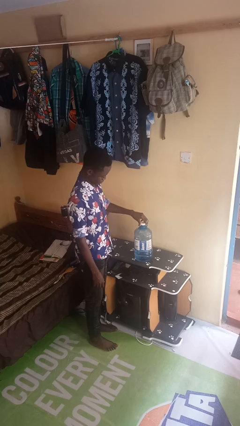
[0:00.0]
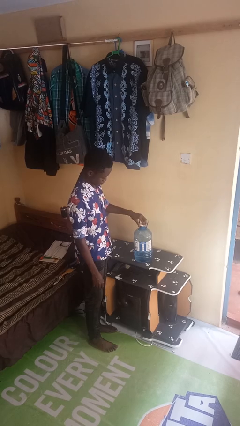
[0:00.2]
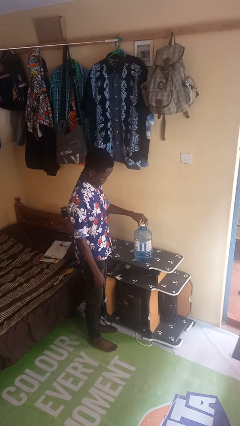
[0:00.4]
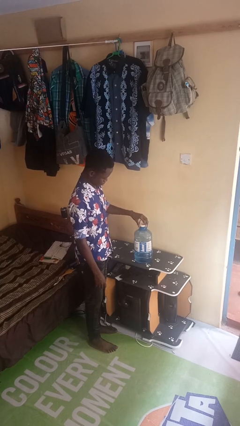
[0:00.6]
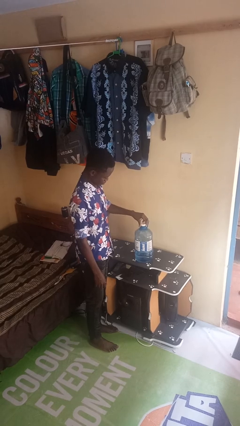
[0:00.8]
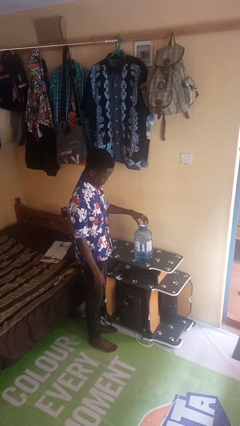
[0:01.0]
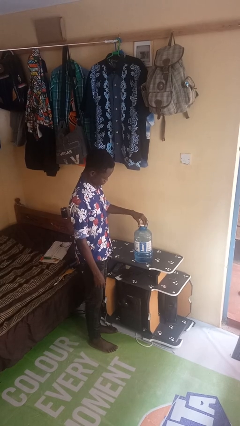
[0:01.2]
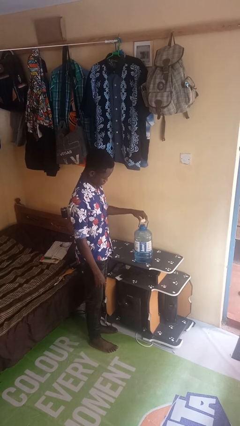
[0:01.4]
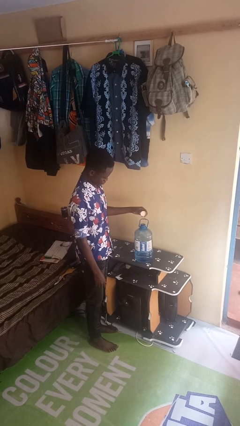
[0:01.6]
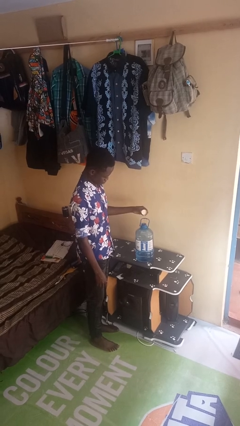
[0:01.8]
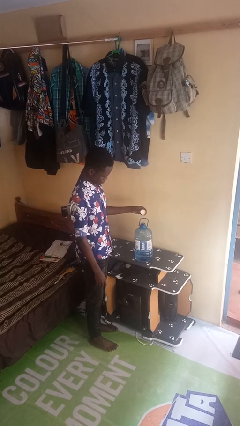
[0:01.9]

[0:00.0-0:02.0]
person unscrews lid from bottle

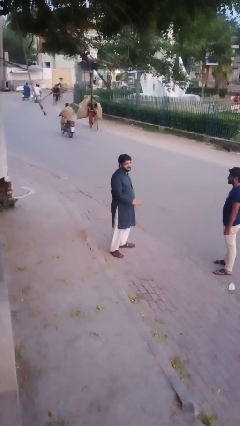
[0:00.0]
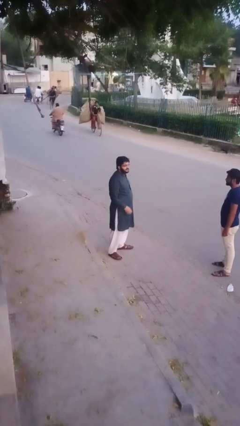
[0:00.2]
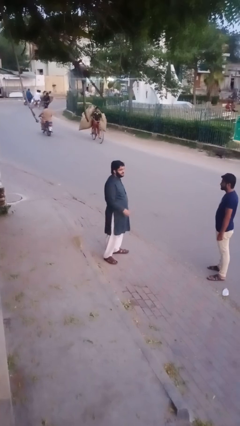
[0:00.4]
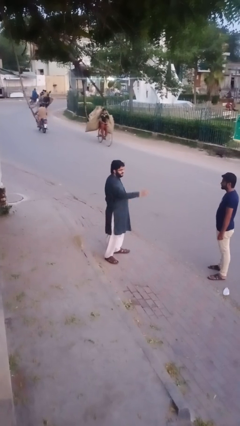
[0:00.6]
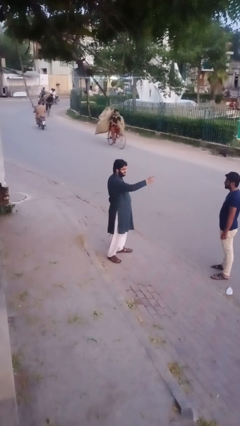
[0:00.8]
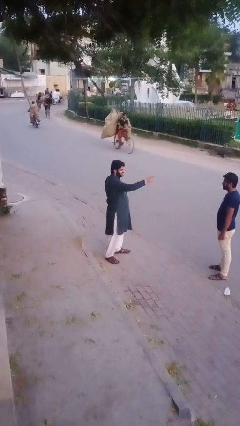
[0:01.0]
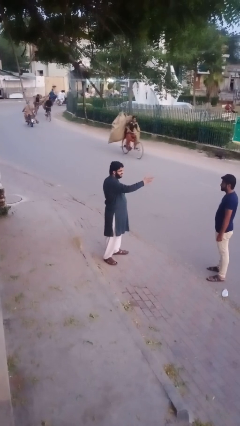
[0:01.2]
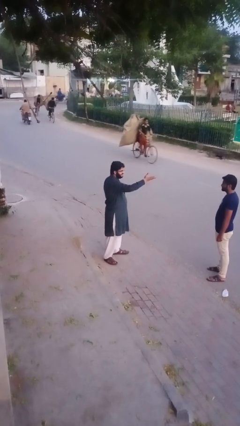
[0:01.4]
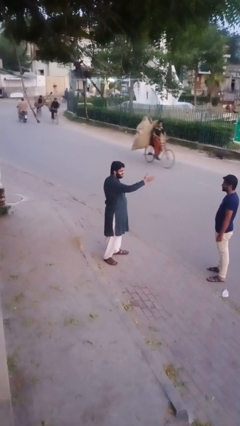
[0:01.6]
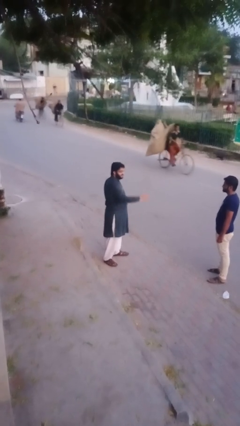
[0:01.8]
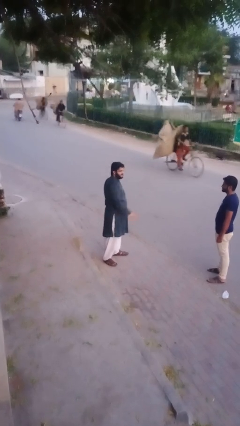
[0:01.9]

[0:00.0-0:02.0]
person points at person

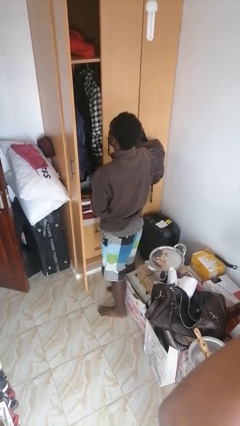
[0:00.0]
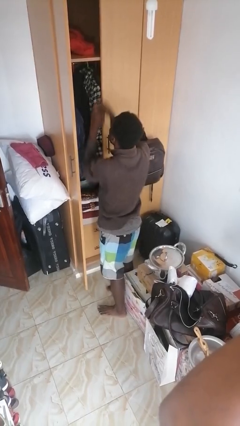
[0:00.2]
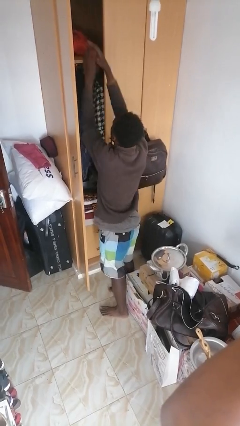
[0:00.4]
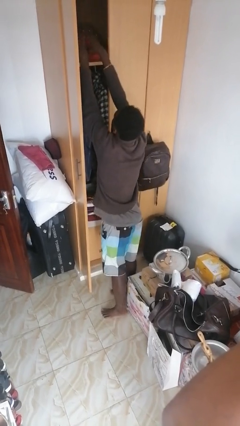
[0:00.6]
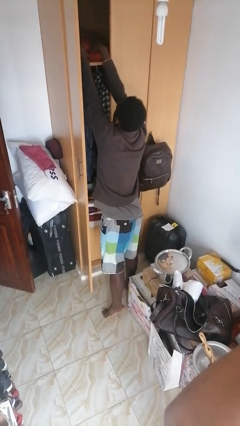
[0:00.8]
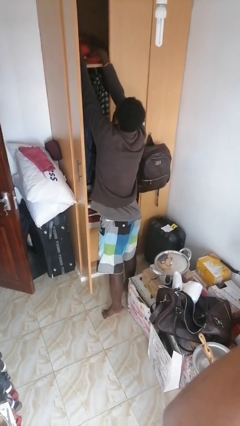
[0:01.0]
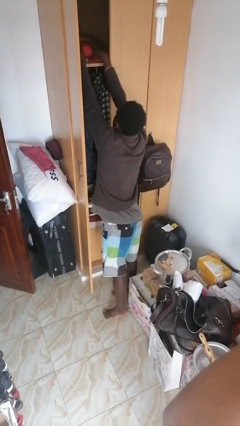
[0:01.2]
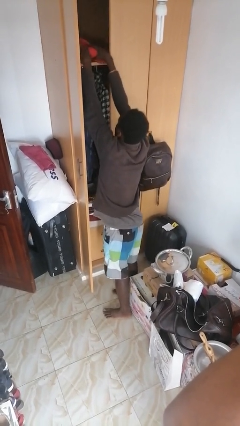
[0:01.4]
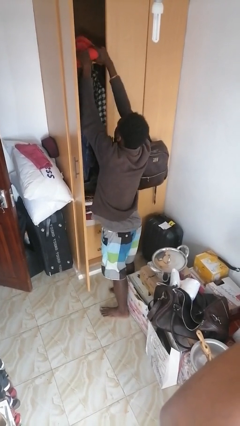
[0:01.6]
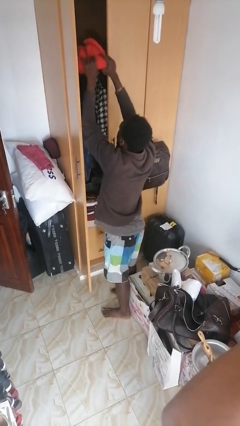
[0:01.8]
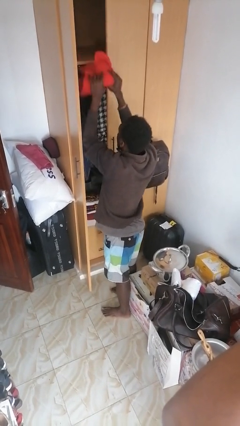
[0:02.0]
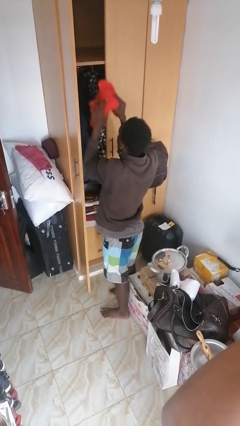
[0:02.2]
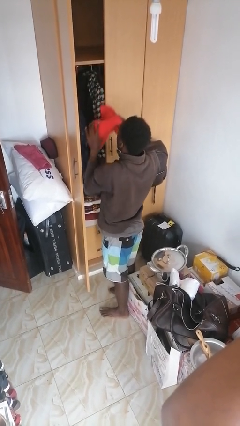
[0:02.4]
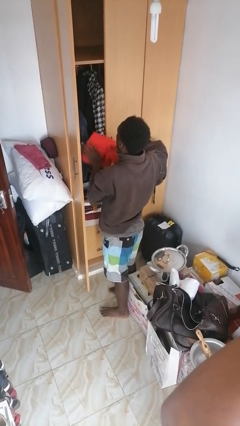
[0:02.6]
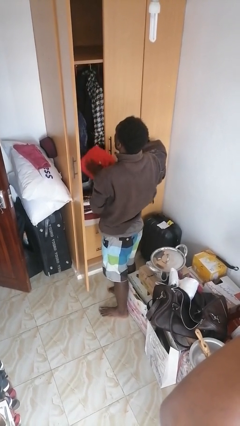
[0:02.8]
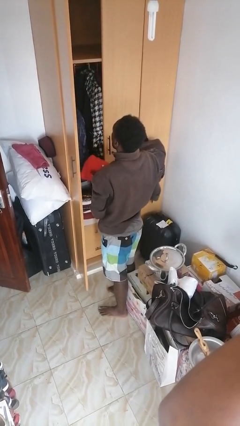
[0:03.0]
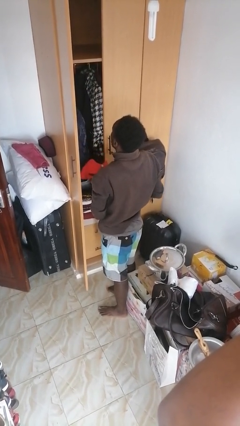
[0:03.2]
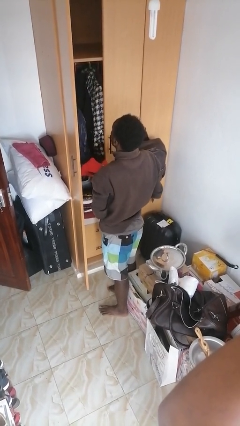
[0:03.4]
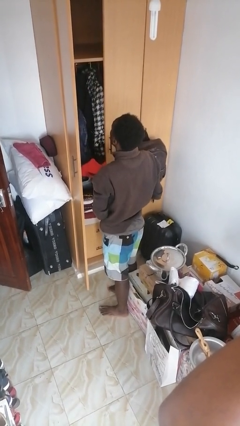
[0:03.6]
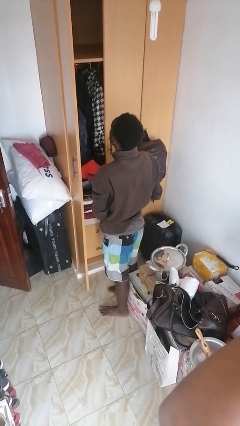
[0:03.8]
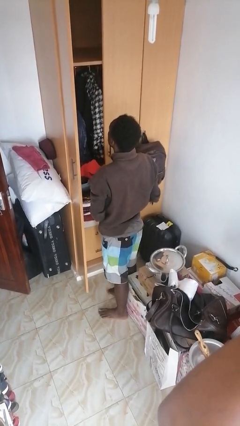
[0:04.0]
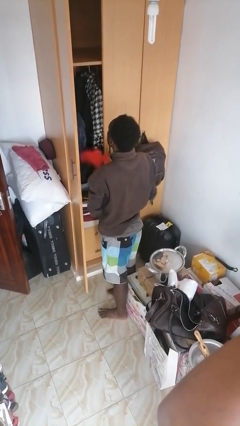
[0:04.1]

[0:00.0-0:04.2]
person picks up object from shelf

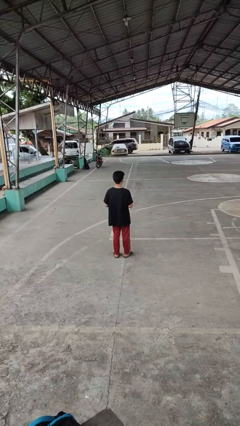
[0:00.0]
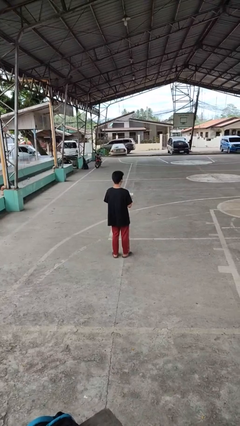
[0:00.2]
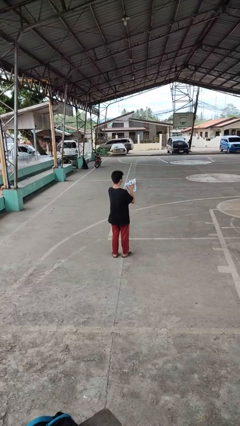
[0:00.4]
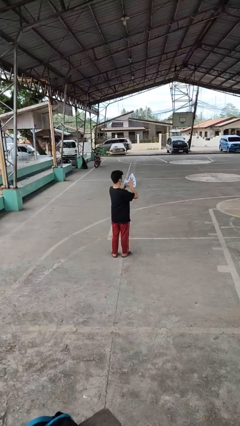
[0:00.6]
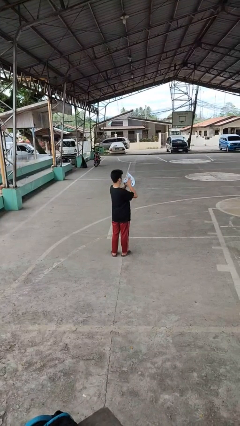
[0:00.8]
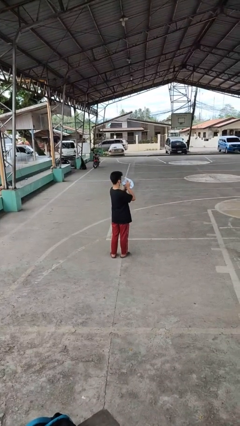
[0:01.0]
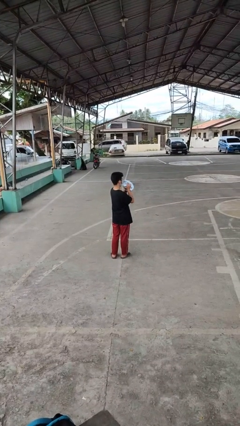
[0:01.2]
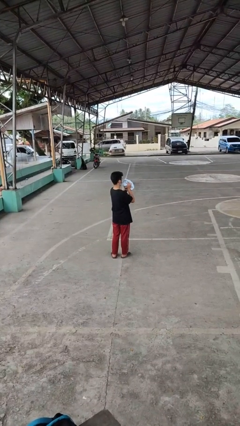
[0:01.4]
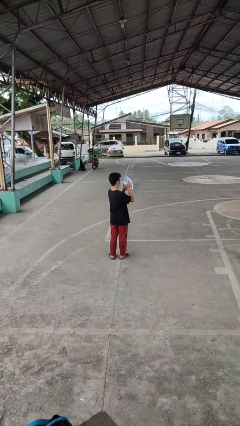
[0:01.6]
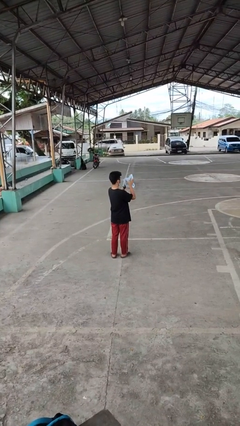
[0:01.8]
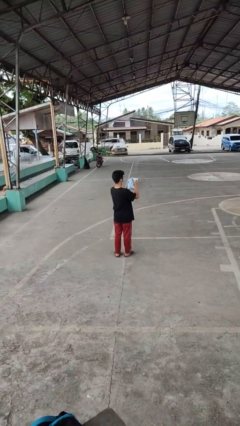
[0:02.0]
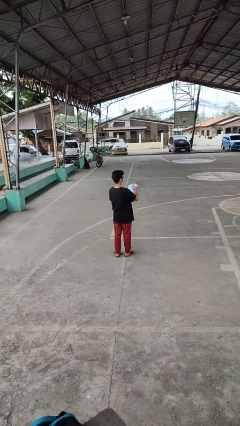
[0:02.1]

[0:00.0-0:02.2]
person squeezes object

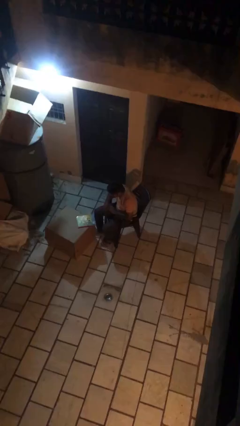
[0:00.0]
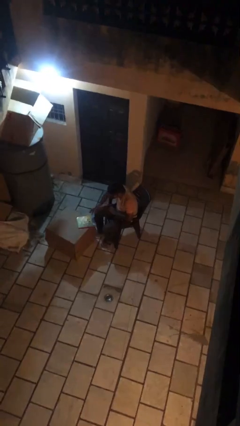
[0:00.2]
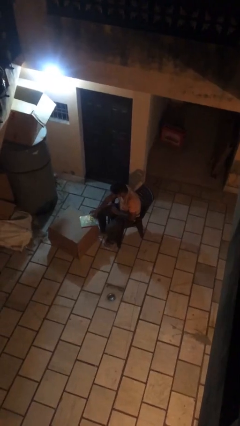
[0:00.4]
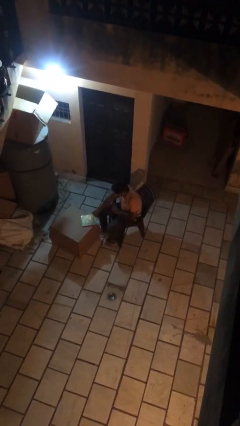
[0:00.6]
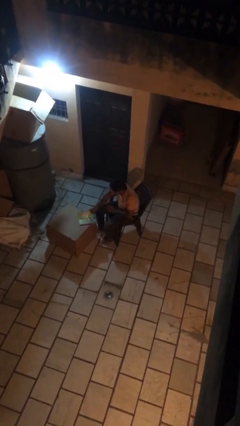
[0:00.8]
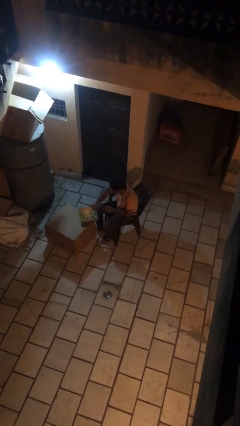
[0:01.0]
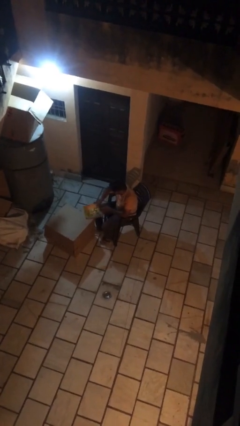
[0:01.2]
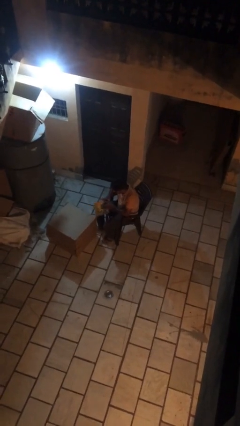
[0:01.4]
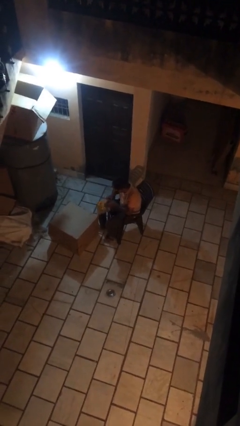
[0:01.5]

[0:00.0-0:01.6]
person picks up object from table

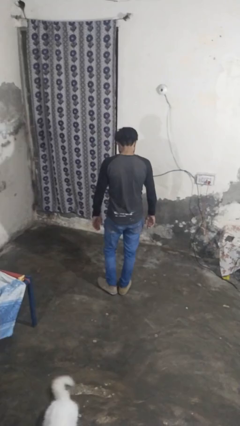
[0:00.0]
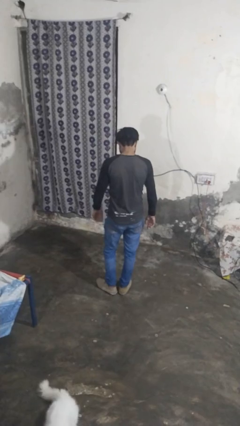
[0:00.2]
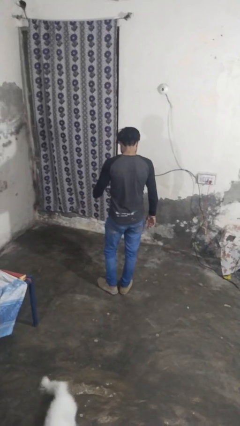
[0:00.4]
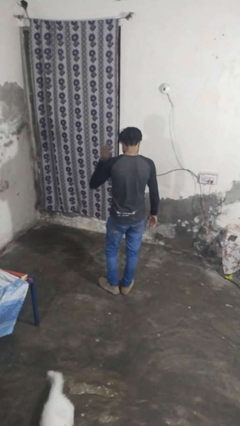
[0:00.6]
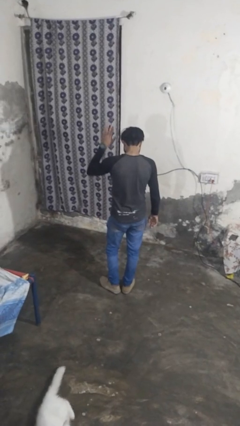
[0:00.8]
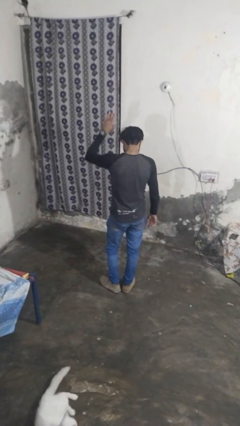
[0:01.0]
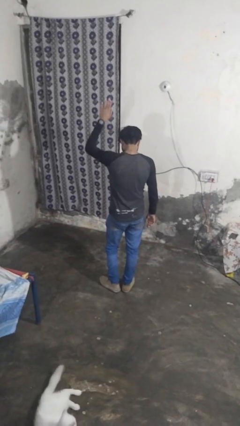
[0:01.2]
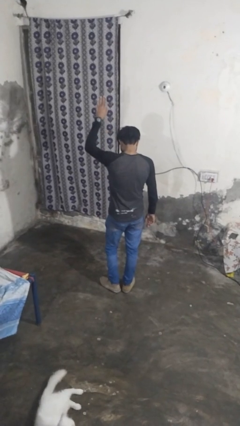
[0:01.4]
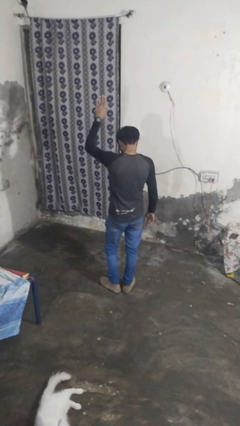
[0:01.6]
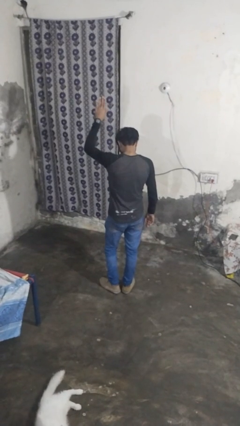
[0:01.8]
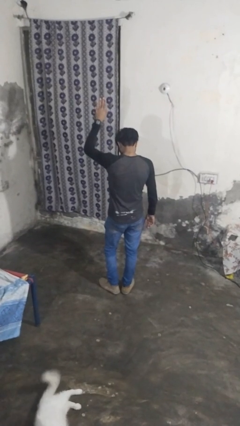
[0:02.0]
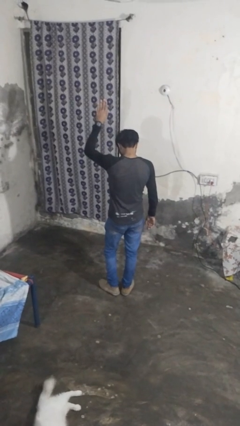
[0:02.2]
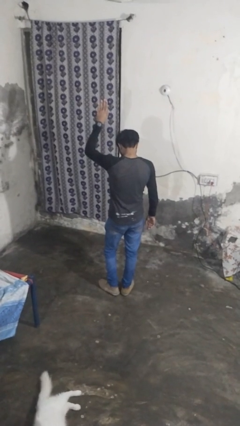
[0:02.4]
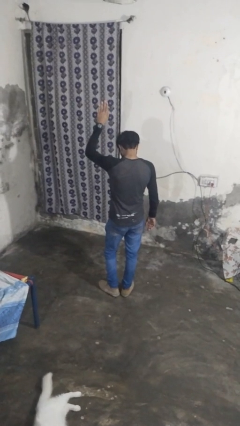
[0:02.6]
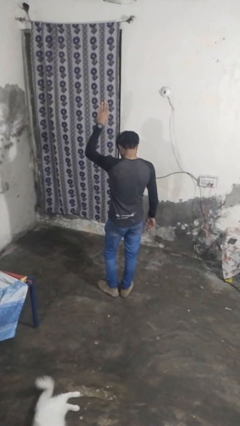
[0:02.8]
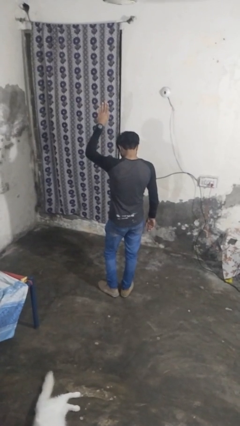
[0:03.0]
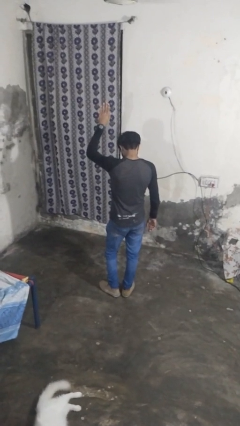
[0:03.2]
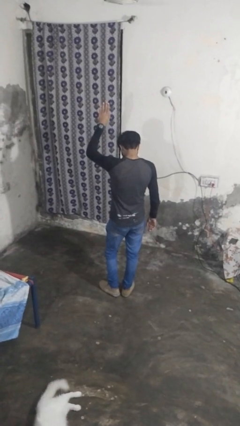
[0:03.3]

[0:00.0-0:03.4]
person gestures raise hand

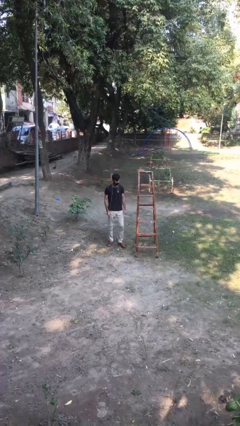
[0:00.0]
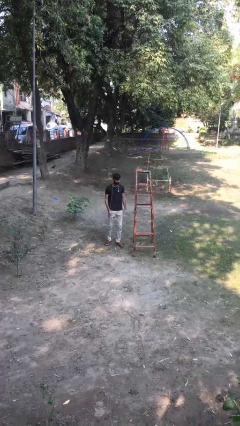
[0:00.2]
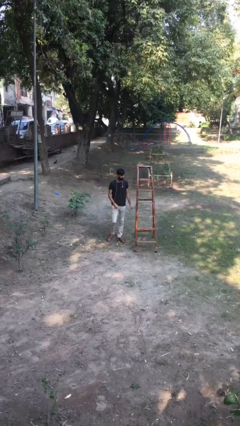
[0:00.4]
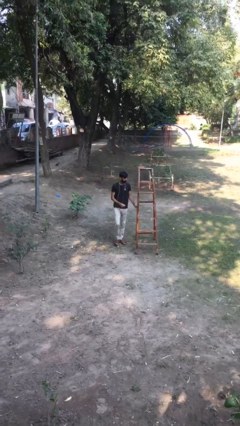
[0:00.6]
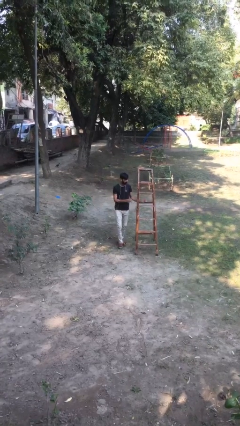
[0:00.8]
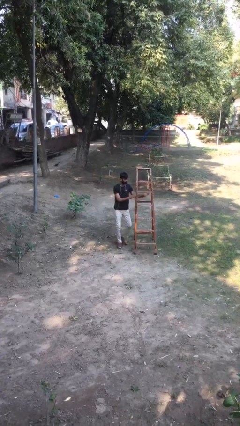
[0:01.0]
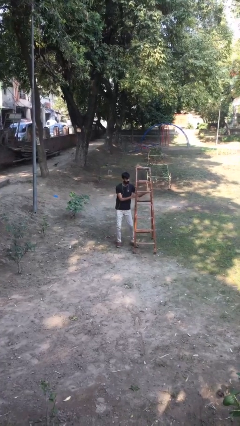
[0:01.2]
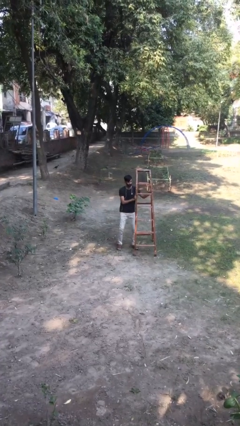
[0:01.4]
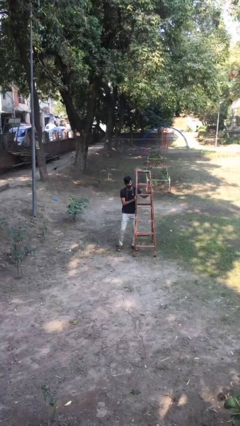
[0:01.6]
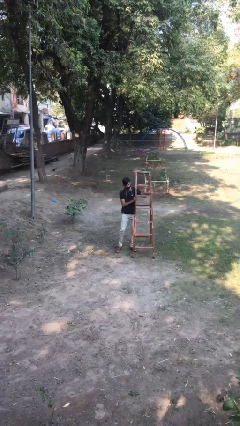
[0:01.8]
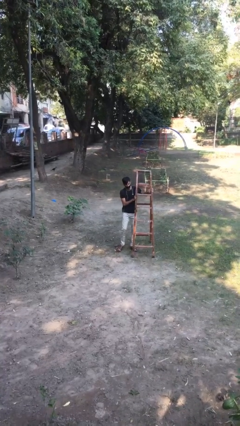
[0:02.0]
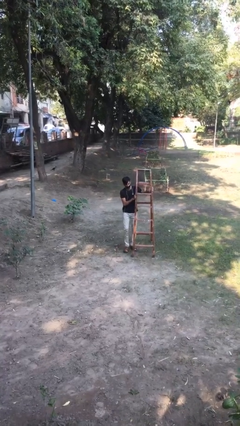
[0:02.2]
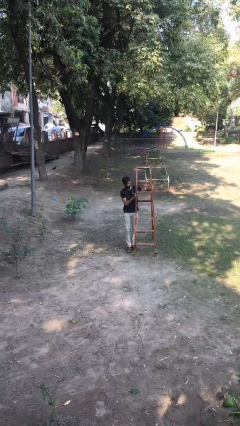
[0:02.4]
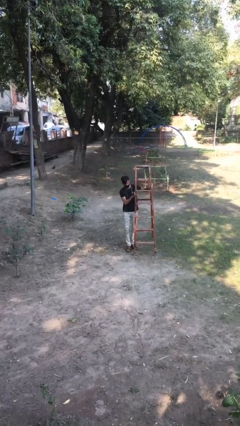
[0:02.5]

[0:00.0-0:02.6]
person picks up object from floor
